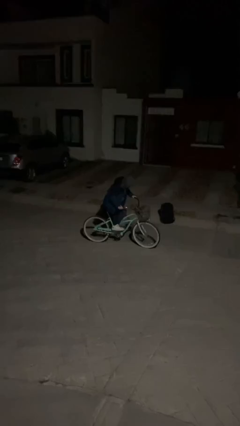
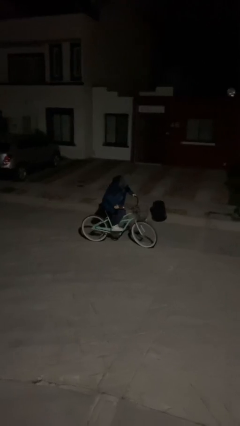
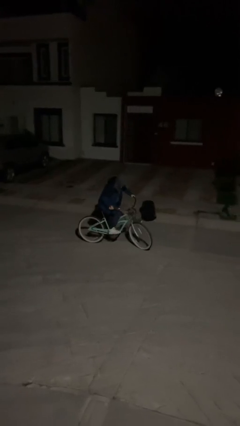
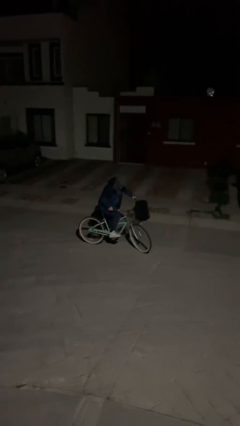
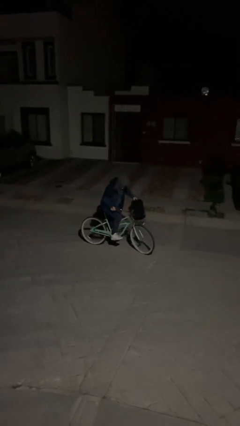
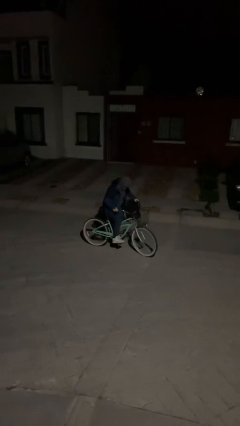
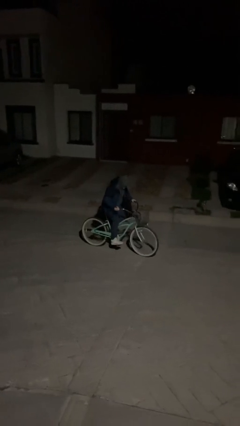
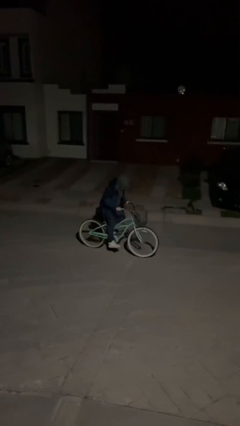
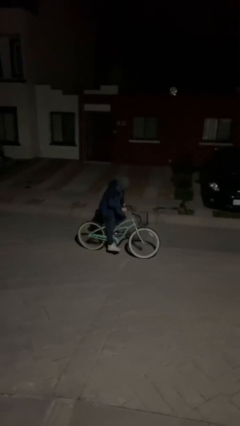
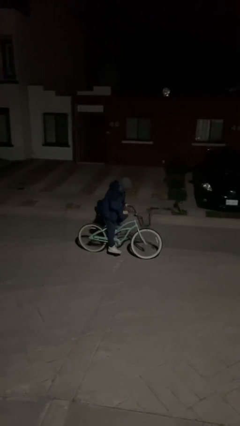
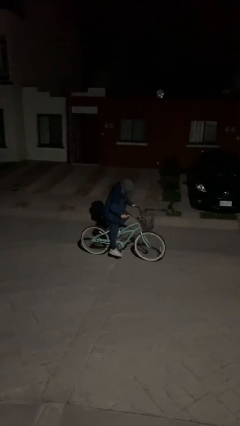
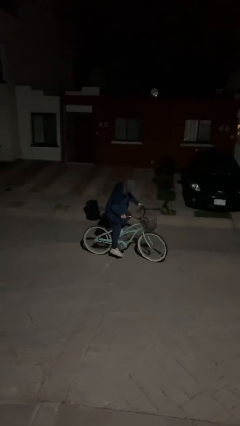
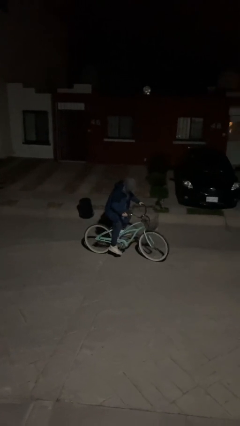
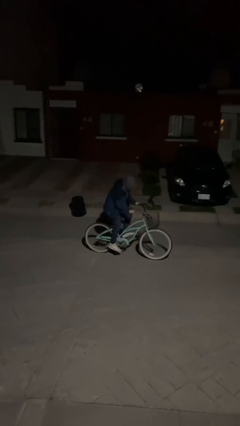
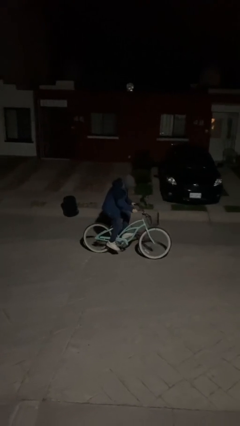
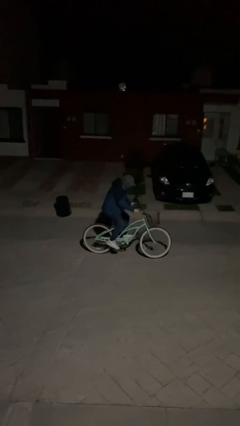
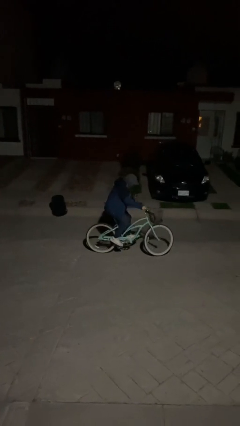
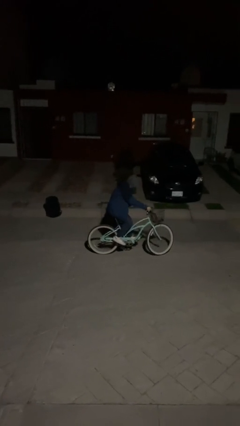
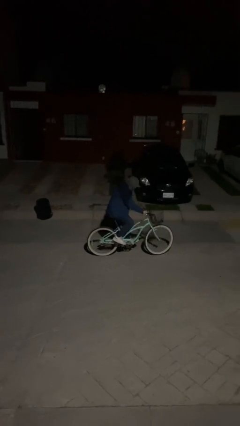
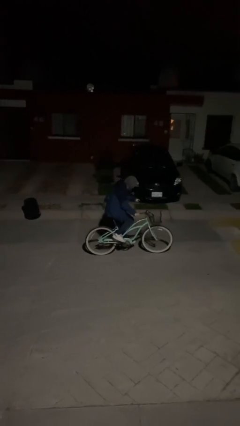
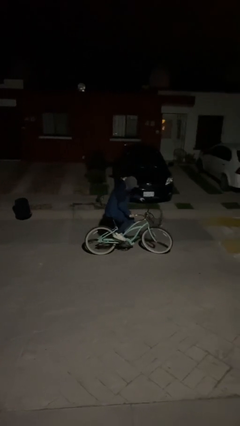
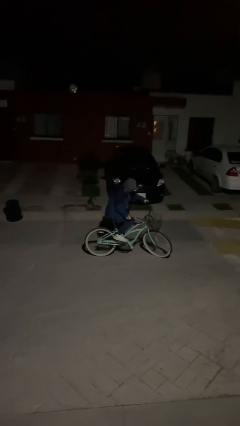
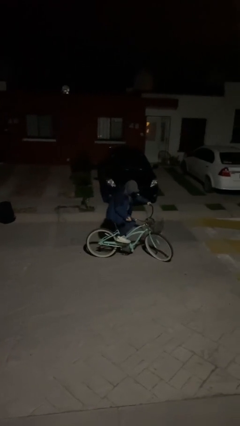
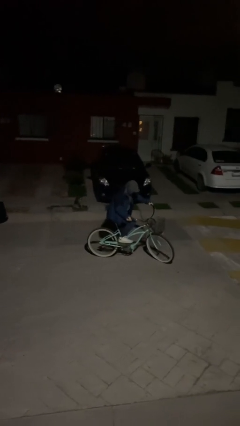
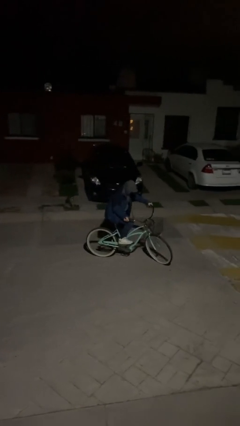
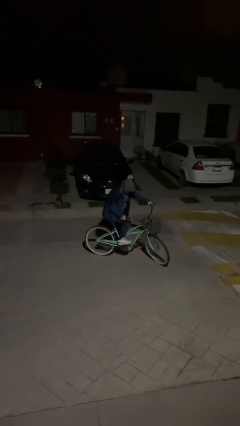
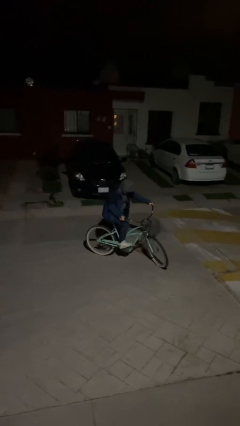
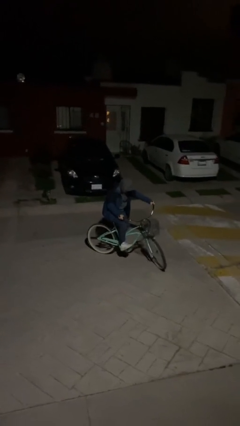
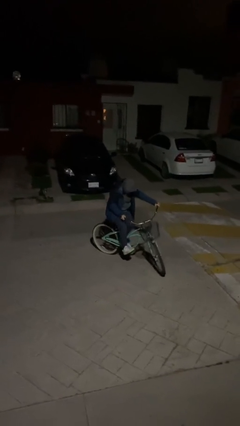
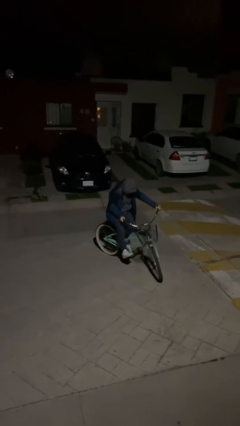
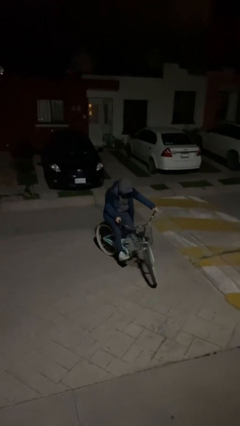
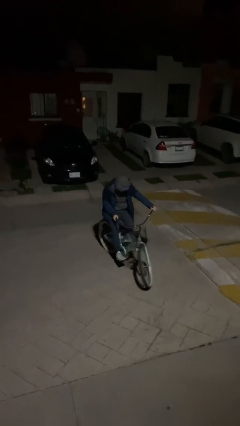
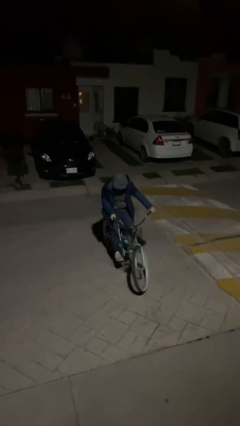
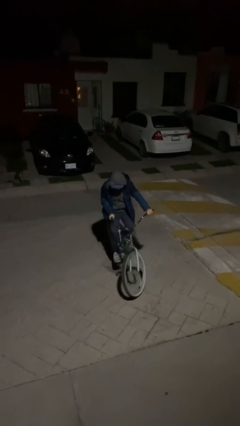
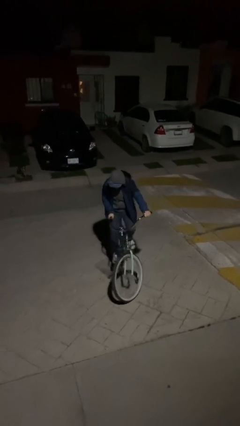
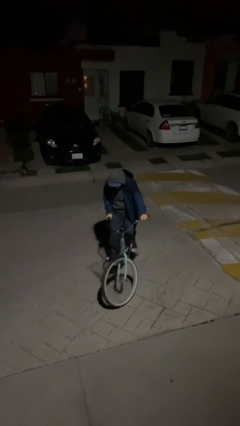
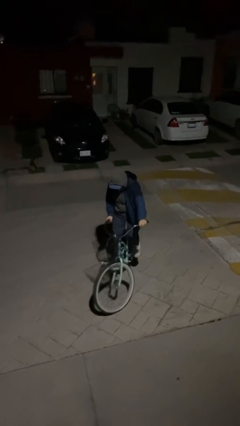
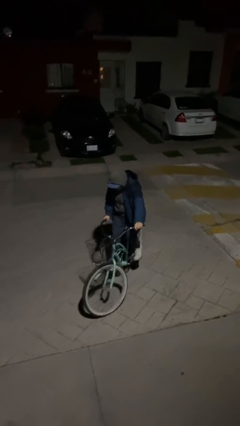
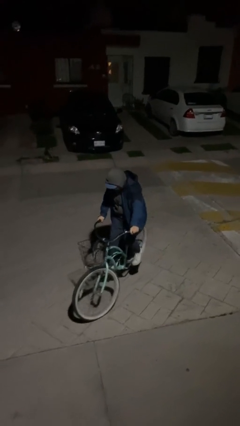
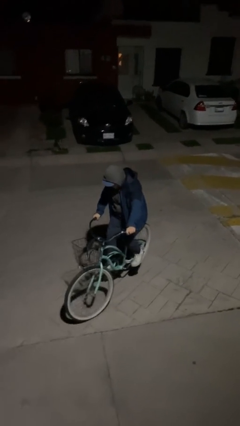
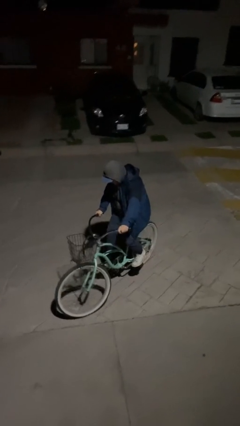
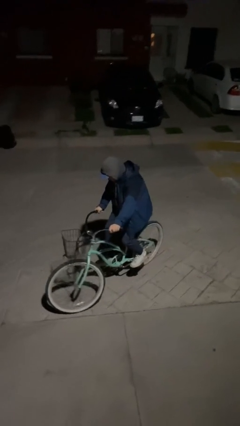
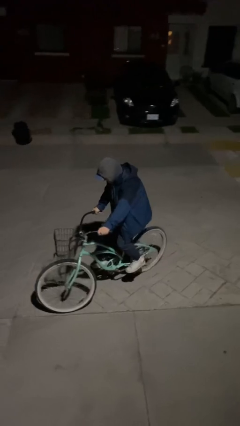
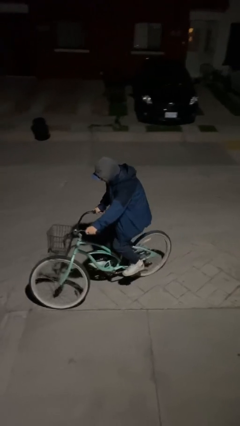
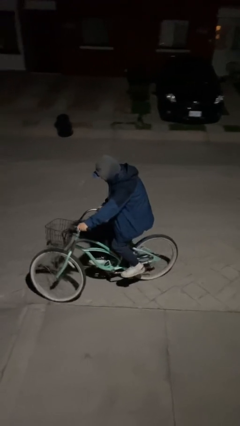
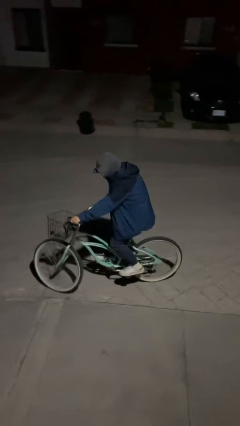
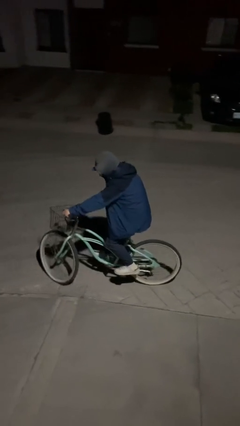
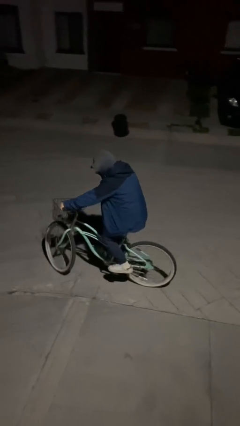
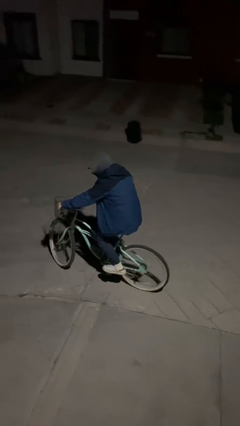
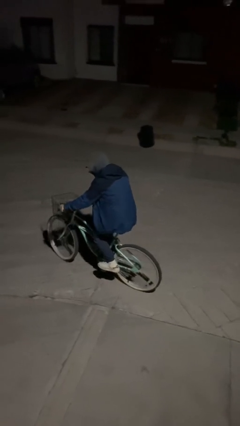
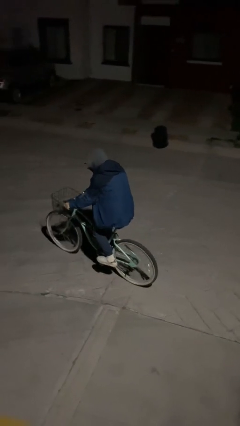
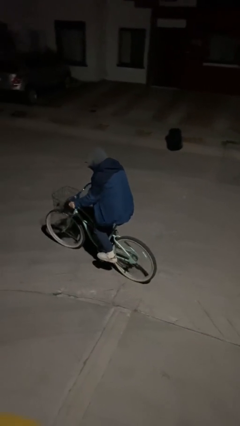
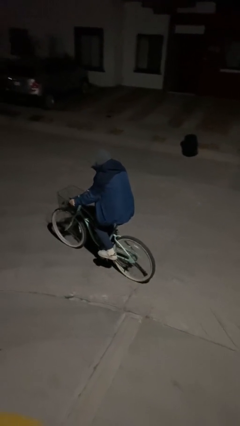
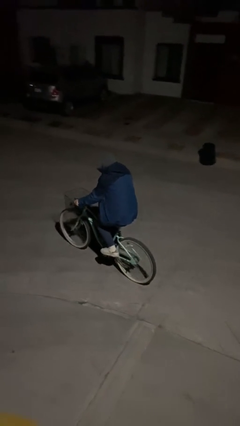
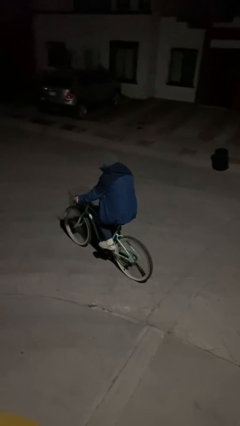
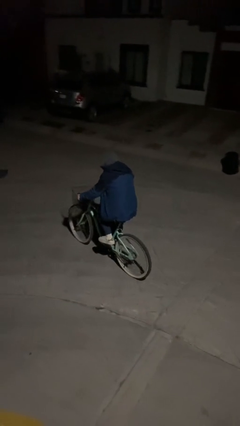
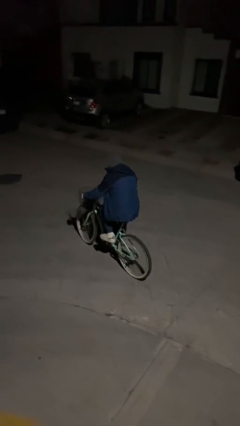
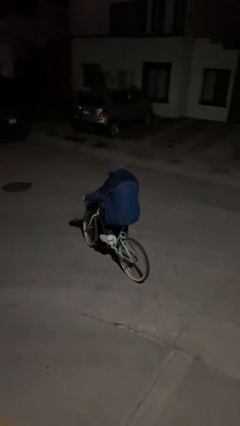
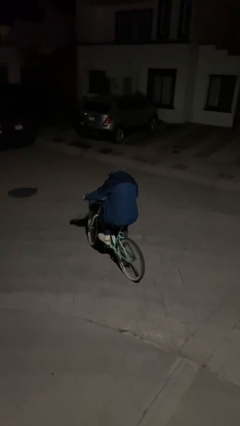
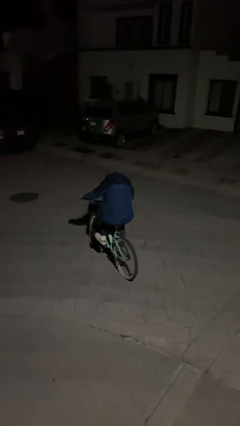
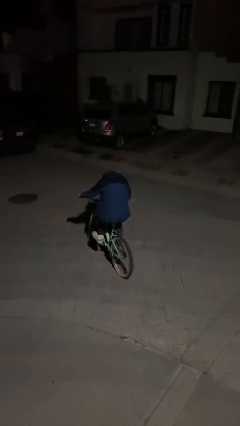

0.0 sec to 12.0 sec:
person rides bicycle

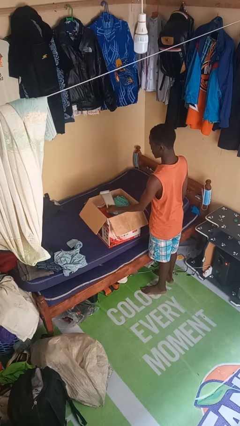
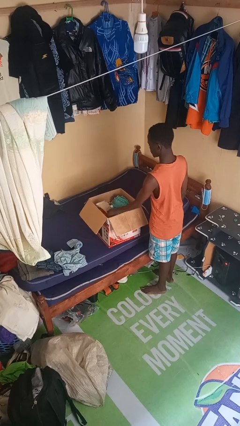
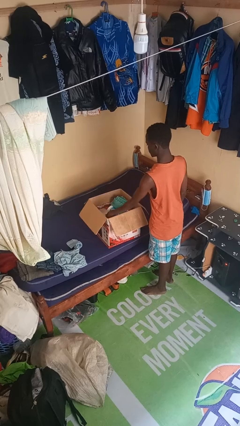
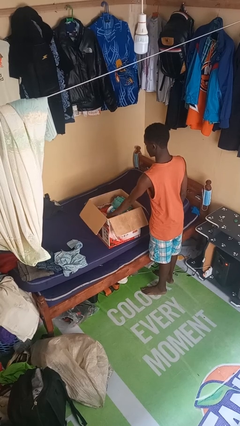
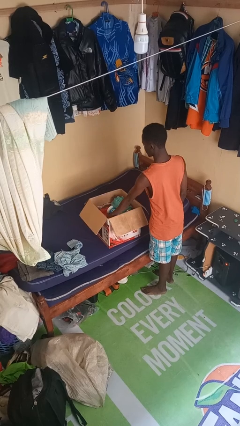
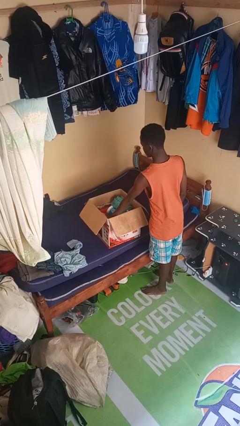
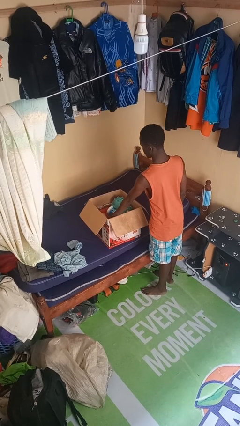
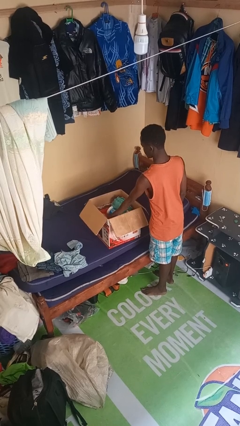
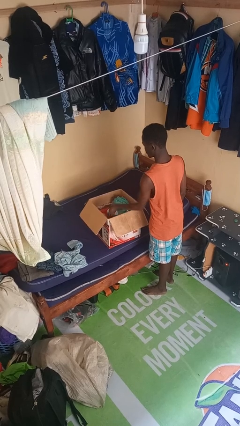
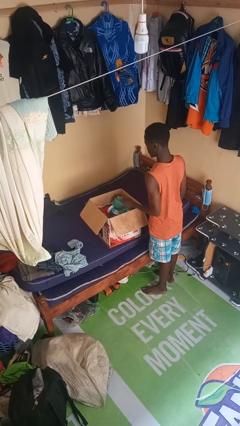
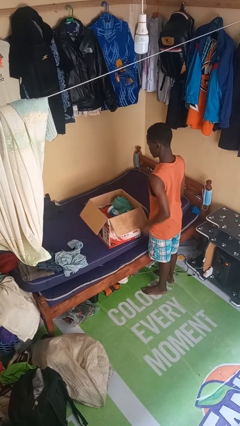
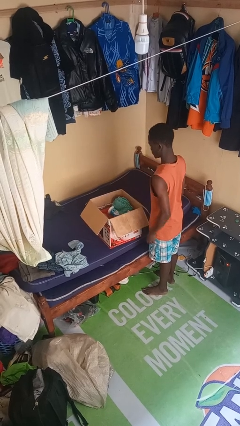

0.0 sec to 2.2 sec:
person puts object into box

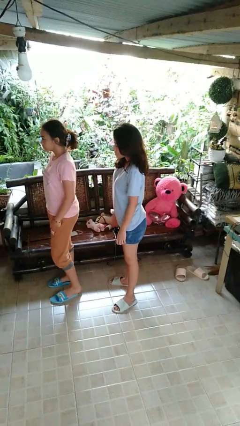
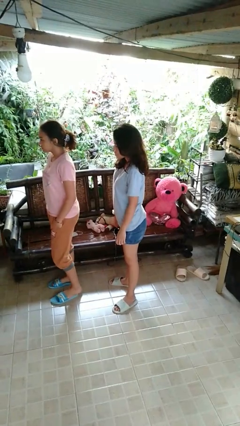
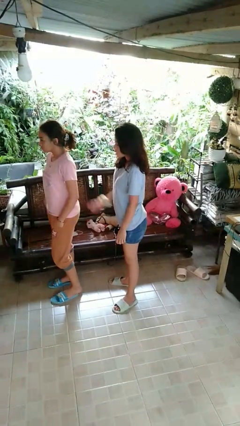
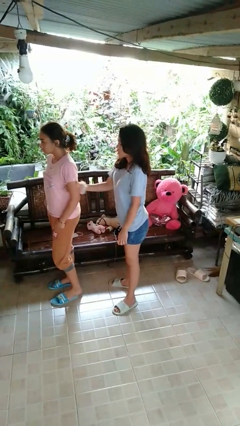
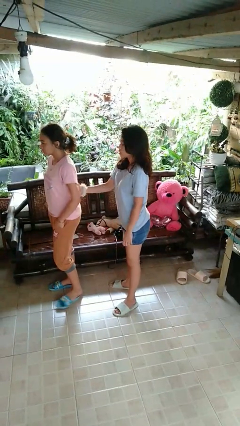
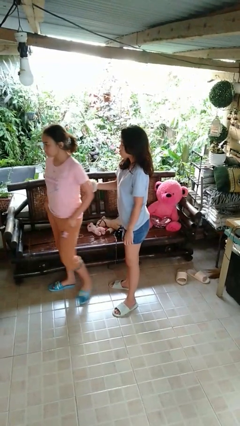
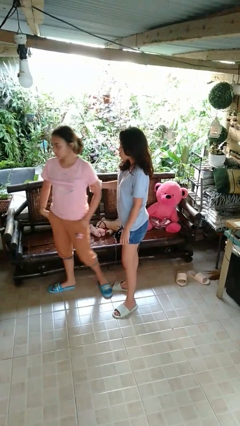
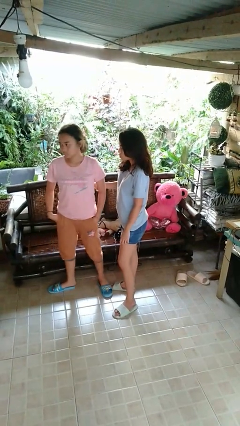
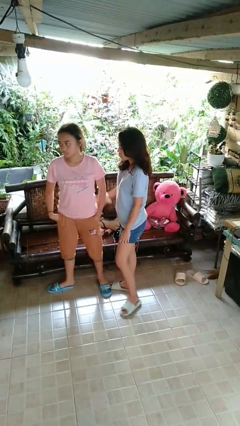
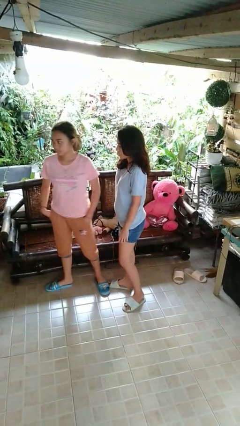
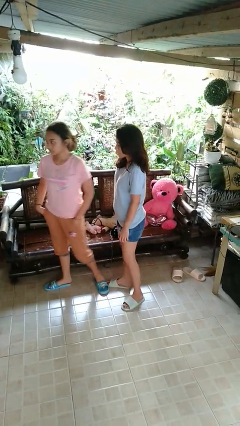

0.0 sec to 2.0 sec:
person grabs person by bicep

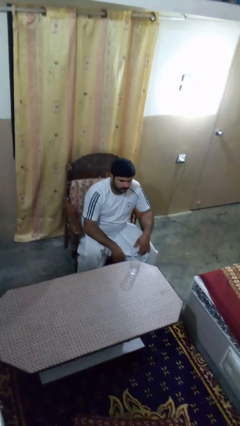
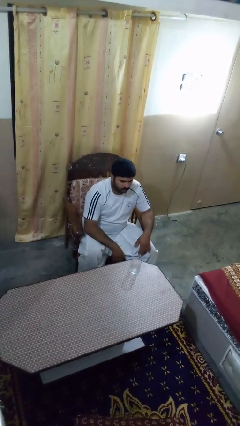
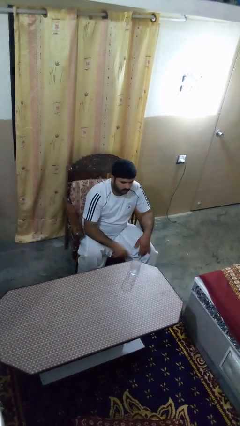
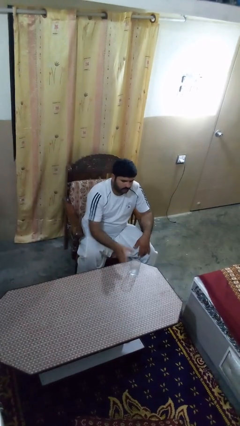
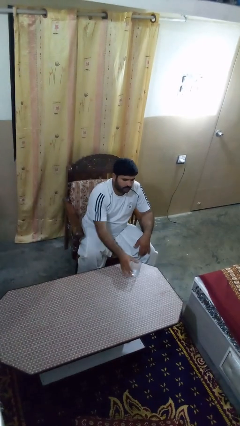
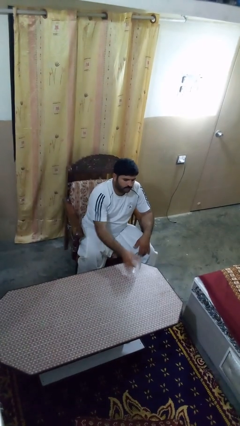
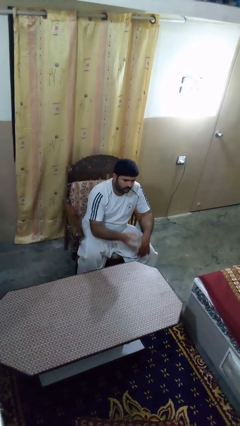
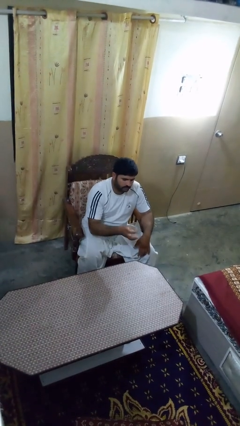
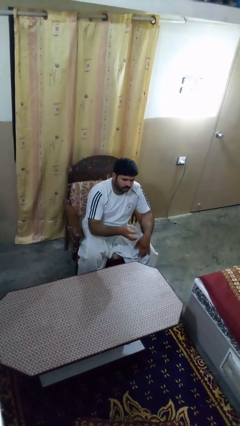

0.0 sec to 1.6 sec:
person picks up object from table
